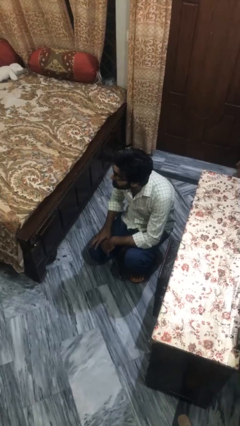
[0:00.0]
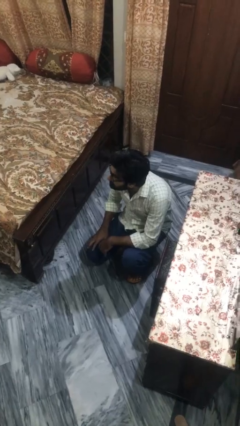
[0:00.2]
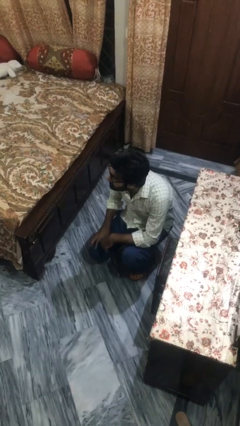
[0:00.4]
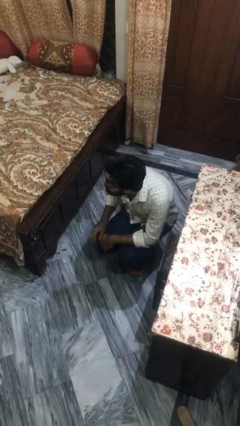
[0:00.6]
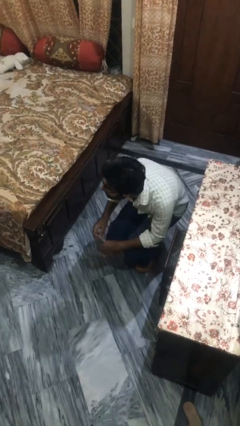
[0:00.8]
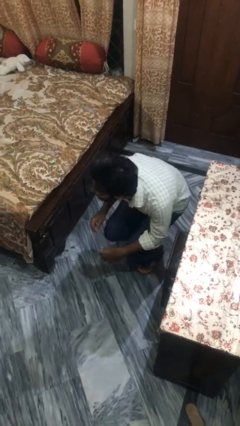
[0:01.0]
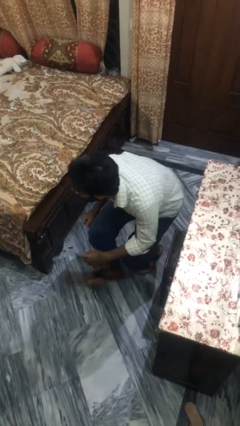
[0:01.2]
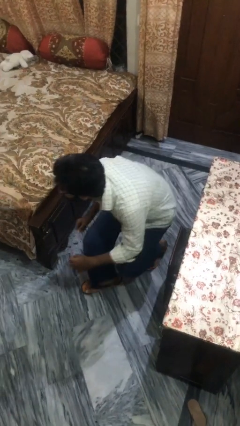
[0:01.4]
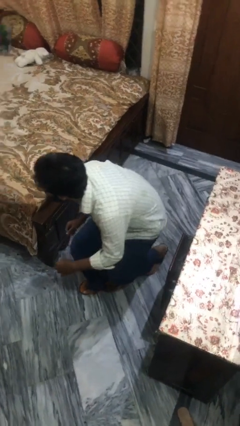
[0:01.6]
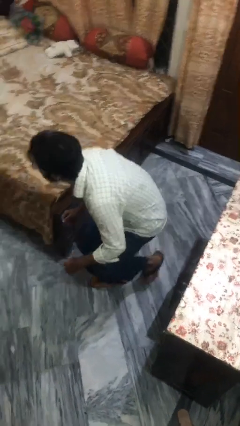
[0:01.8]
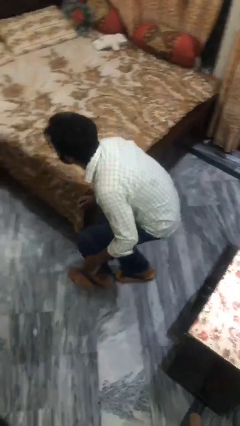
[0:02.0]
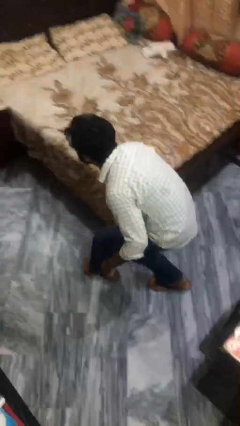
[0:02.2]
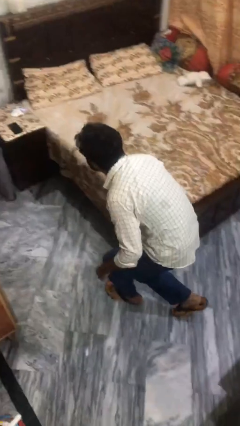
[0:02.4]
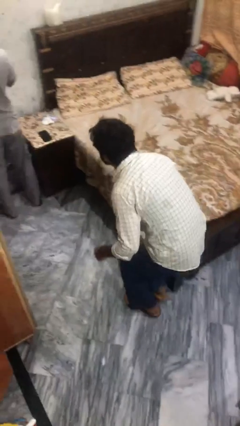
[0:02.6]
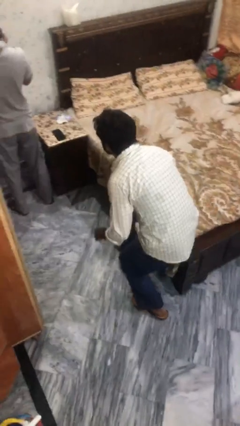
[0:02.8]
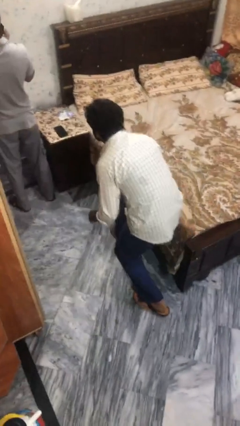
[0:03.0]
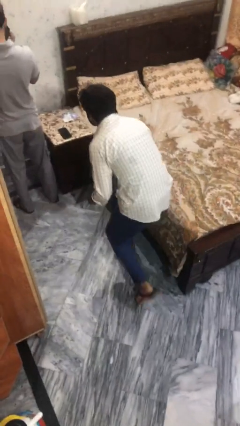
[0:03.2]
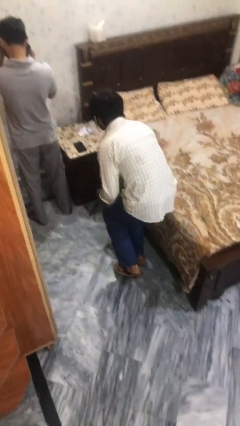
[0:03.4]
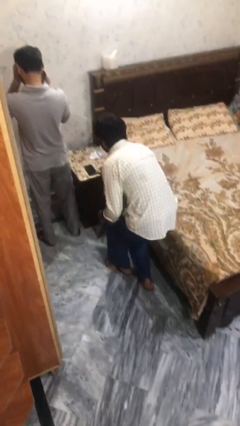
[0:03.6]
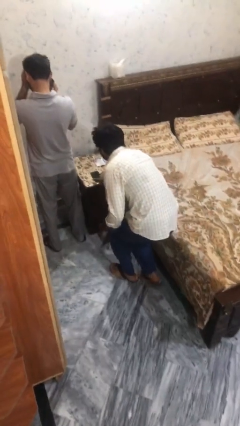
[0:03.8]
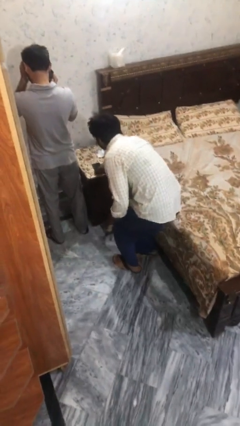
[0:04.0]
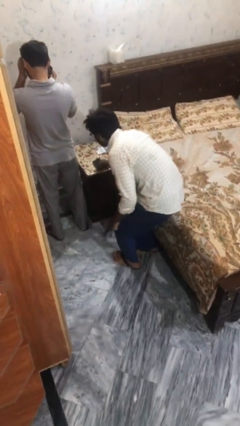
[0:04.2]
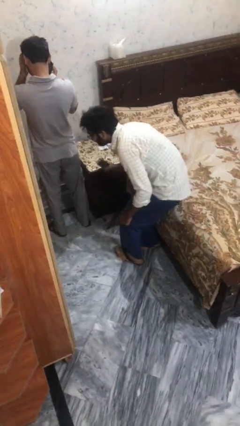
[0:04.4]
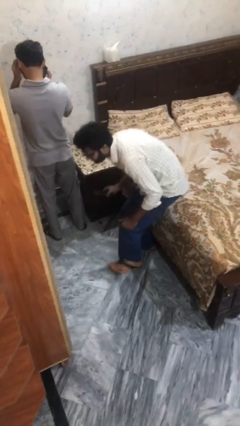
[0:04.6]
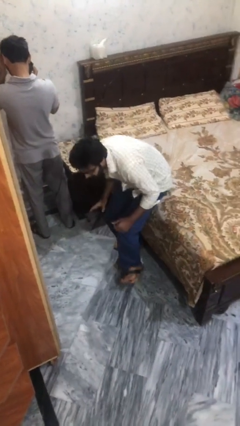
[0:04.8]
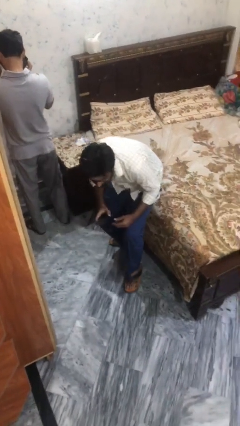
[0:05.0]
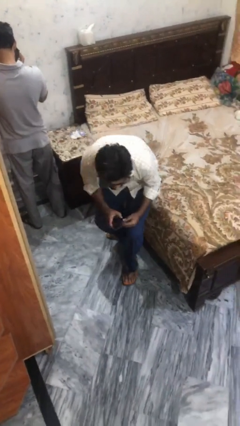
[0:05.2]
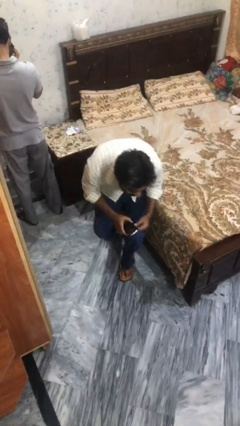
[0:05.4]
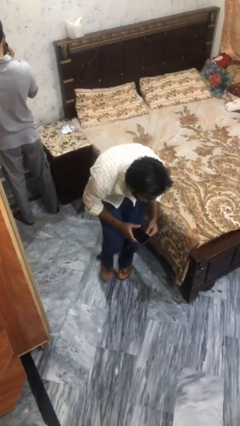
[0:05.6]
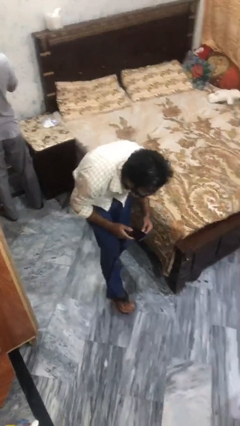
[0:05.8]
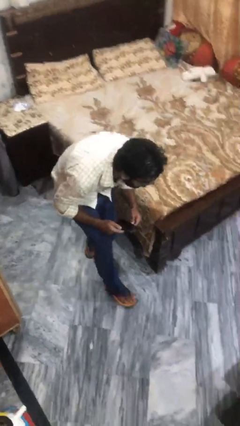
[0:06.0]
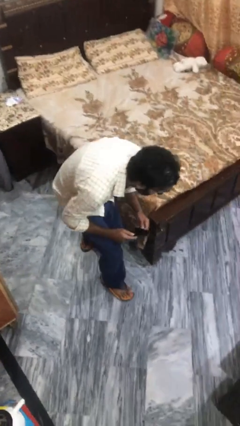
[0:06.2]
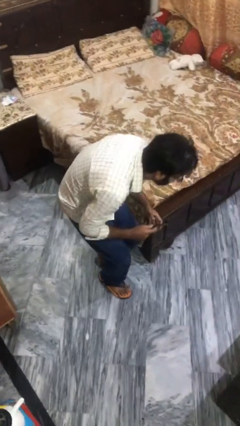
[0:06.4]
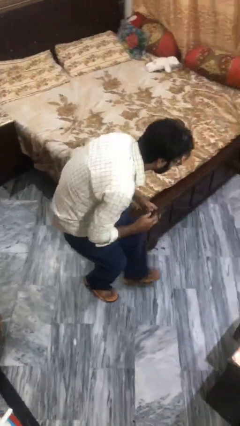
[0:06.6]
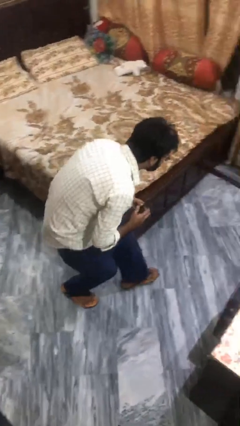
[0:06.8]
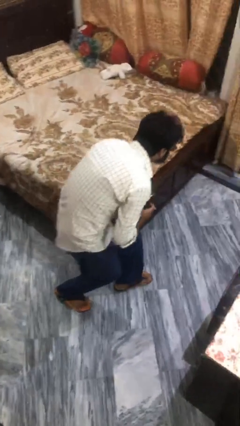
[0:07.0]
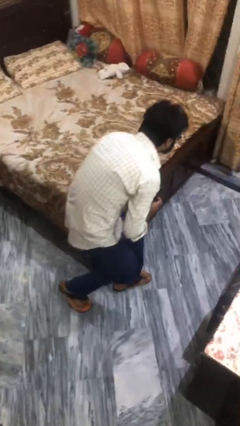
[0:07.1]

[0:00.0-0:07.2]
person steals object from person

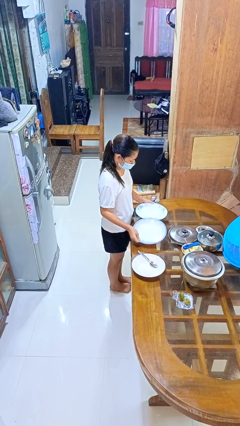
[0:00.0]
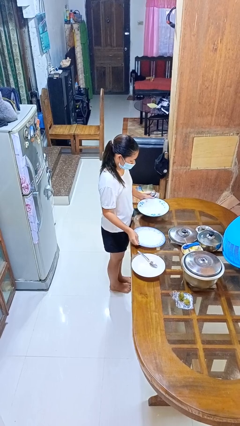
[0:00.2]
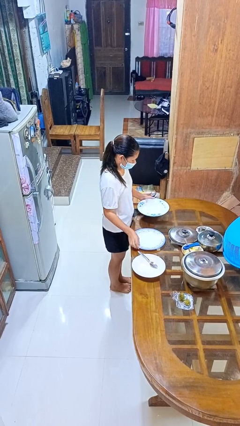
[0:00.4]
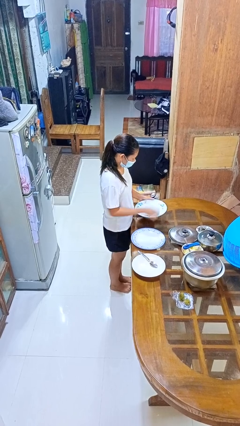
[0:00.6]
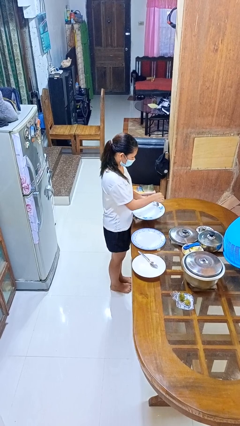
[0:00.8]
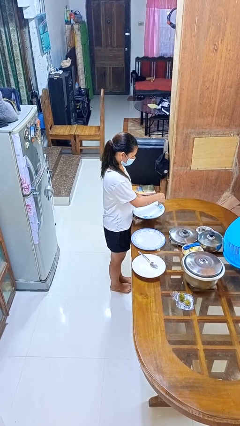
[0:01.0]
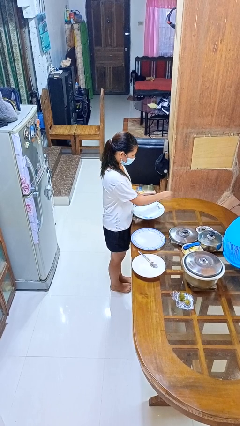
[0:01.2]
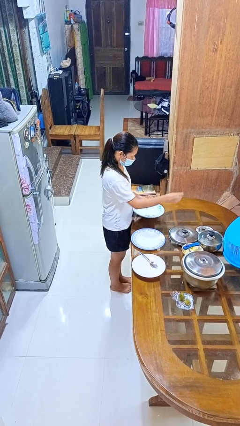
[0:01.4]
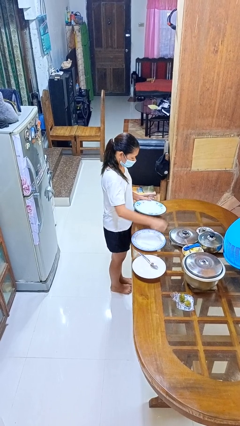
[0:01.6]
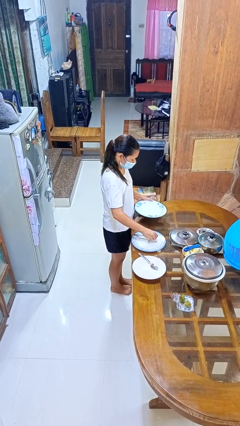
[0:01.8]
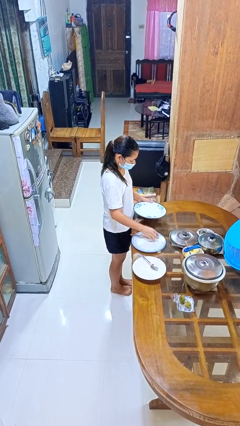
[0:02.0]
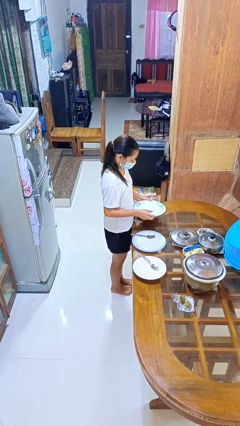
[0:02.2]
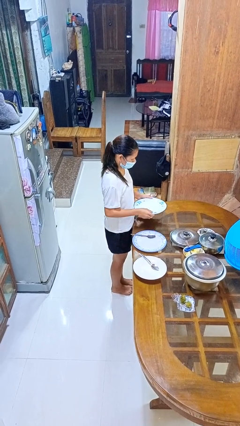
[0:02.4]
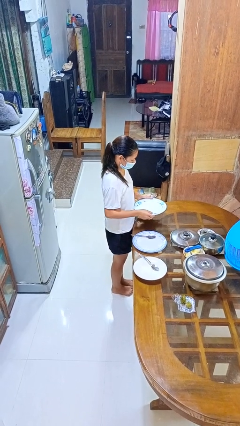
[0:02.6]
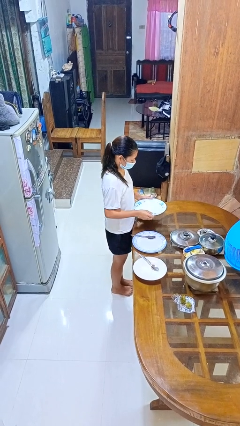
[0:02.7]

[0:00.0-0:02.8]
person sets table

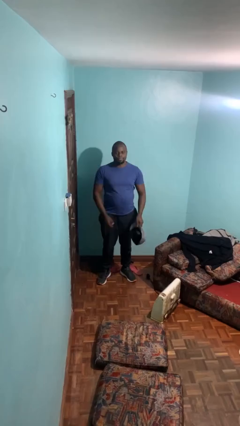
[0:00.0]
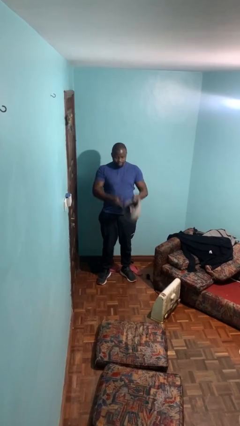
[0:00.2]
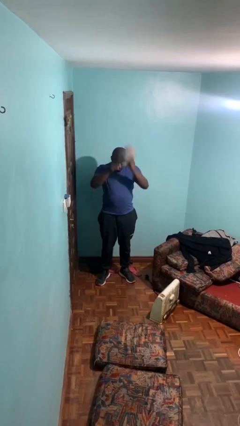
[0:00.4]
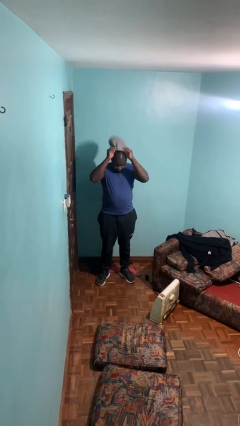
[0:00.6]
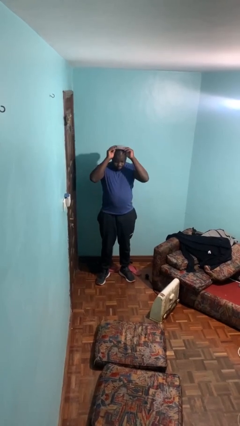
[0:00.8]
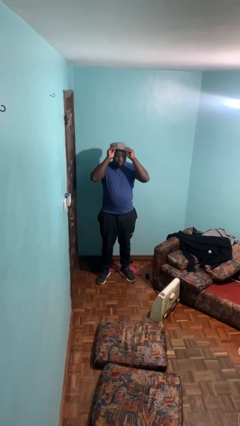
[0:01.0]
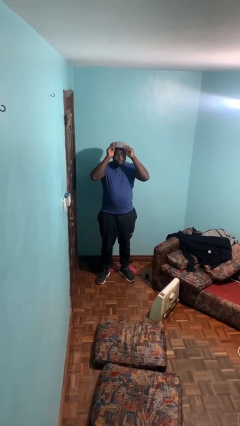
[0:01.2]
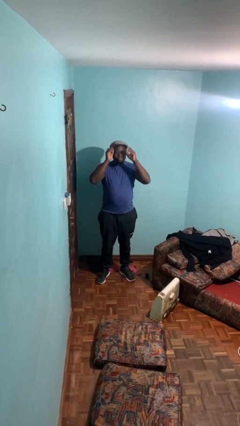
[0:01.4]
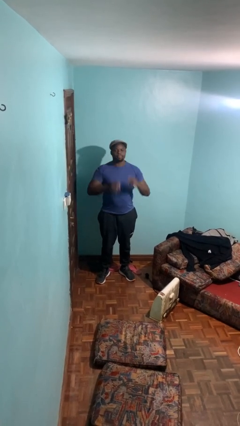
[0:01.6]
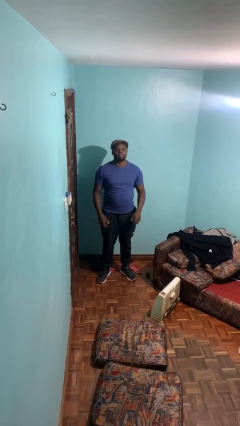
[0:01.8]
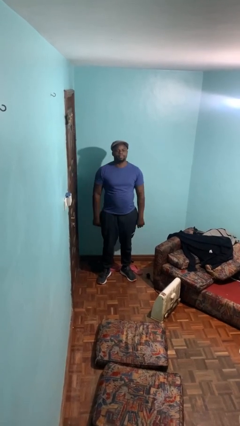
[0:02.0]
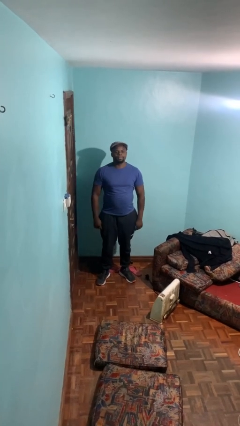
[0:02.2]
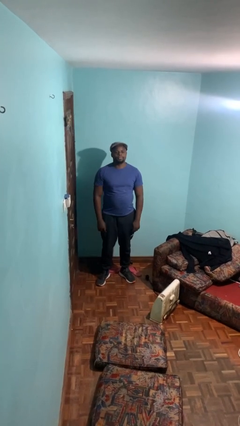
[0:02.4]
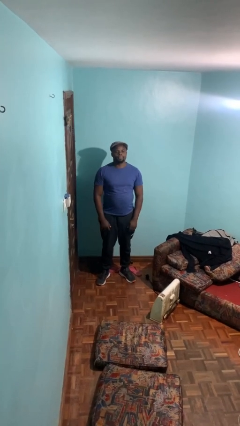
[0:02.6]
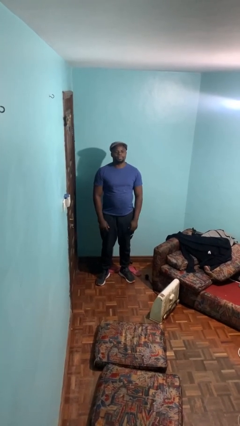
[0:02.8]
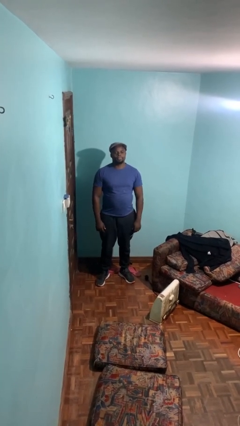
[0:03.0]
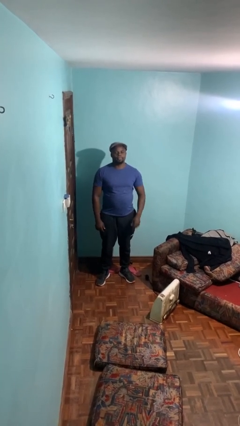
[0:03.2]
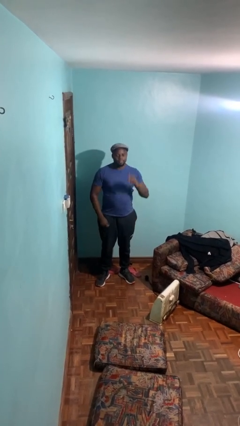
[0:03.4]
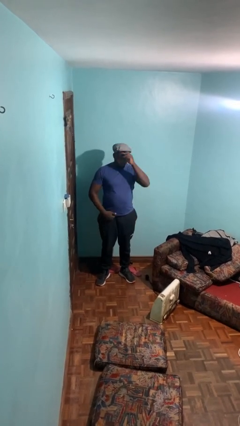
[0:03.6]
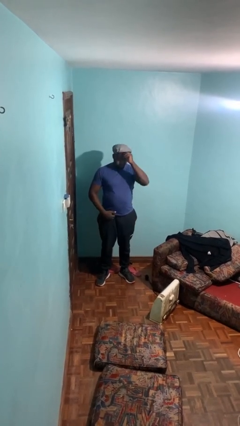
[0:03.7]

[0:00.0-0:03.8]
person puts on hat

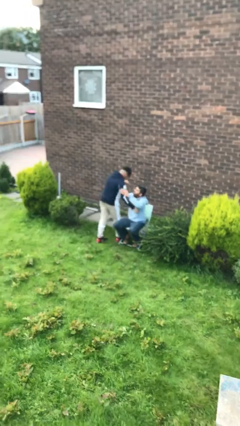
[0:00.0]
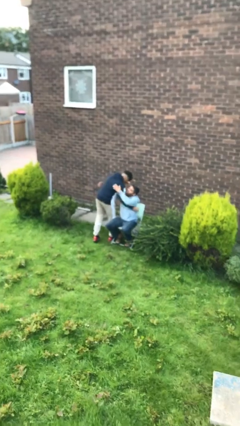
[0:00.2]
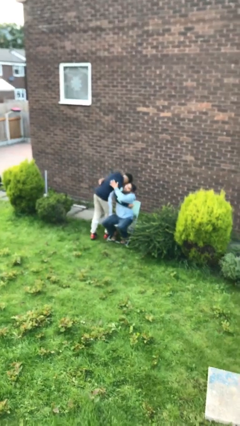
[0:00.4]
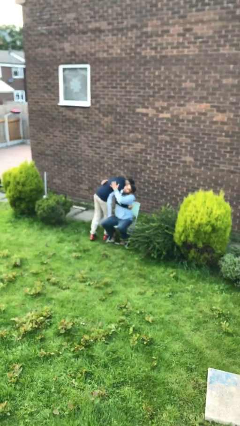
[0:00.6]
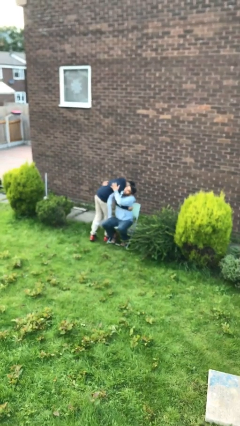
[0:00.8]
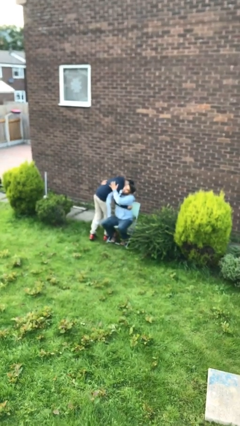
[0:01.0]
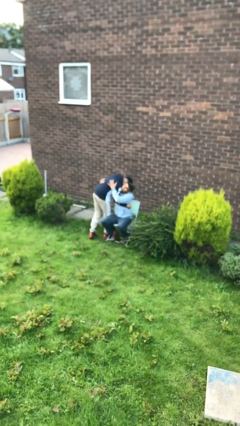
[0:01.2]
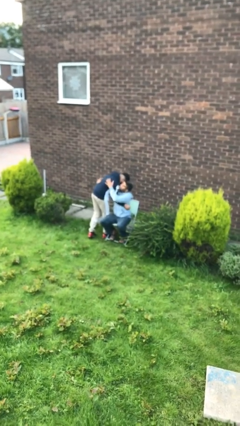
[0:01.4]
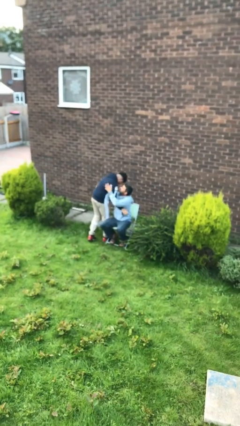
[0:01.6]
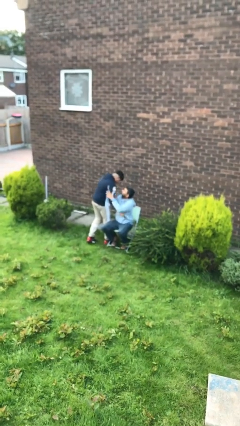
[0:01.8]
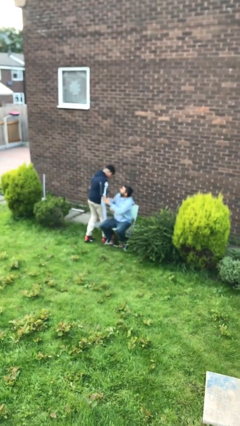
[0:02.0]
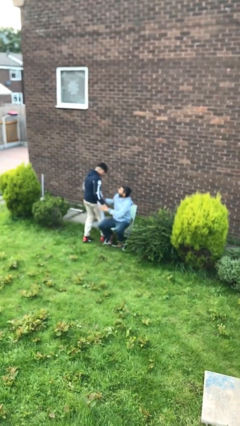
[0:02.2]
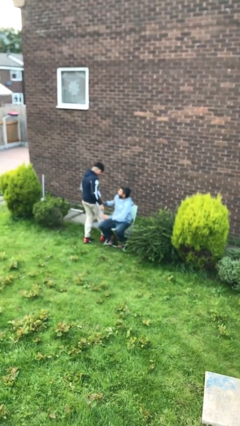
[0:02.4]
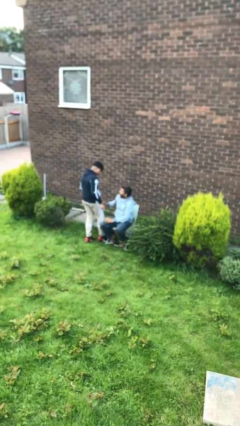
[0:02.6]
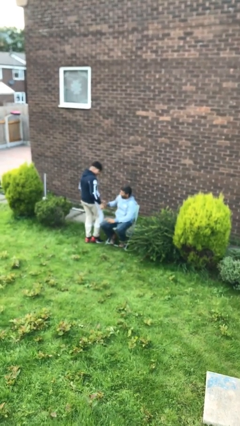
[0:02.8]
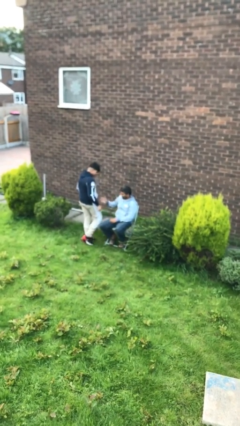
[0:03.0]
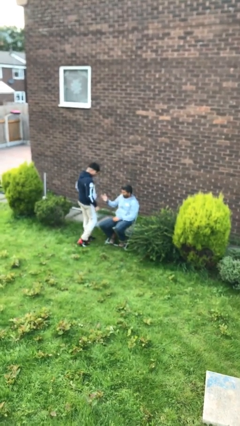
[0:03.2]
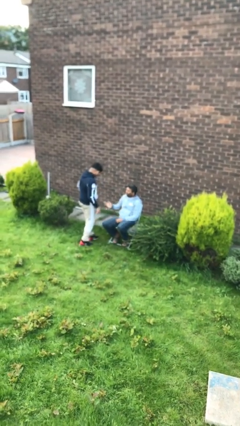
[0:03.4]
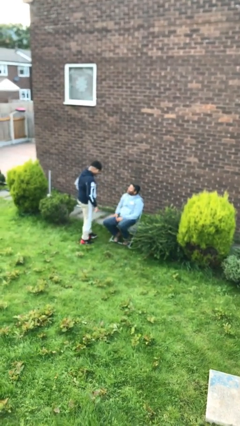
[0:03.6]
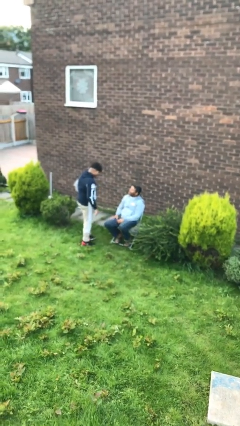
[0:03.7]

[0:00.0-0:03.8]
person embraces person
